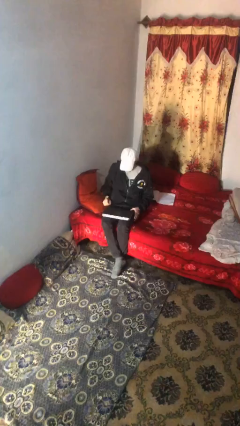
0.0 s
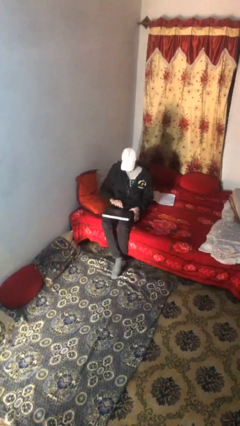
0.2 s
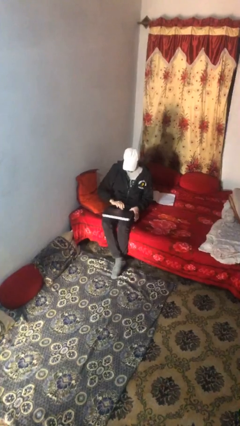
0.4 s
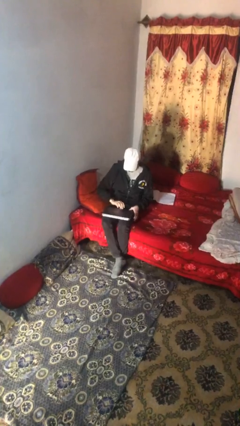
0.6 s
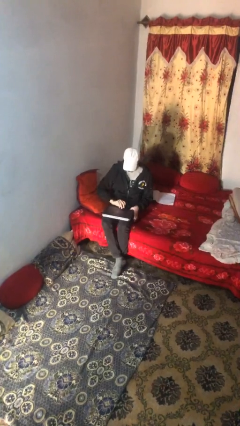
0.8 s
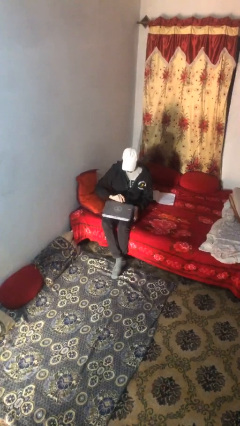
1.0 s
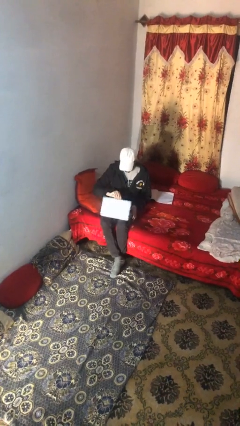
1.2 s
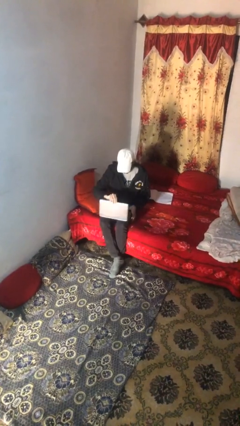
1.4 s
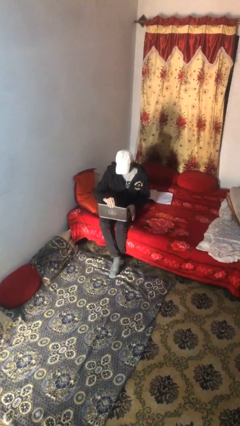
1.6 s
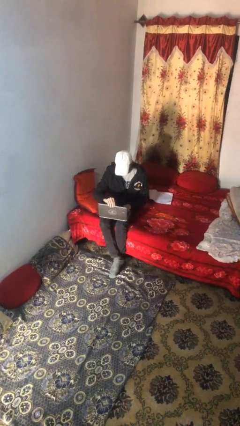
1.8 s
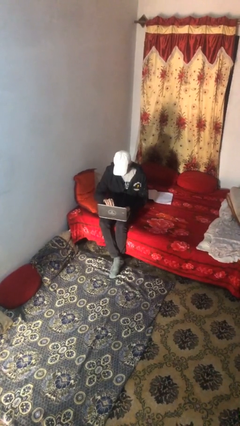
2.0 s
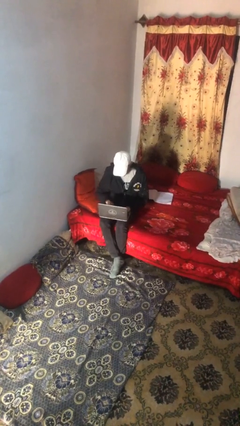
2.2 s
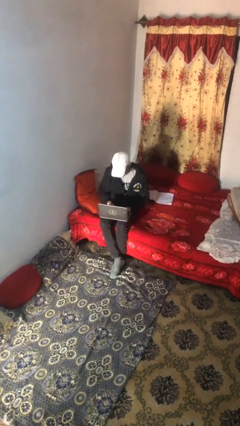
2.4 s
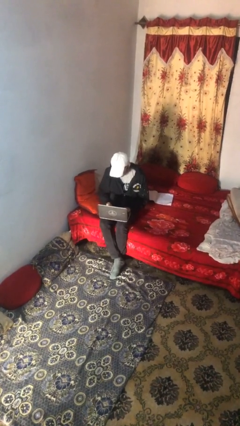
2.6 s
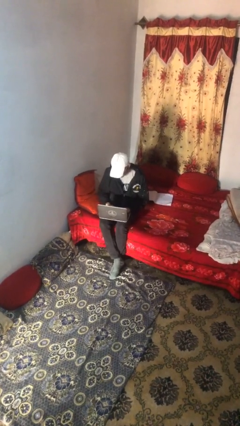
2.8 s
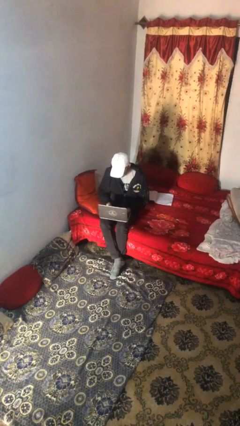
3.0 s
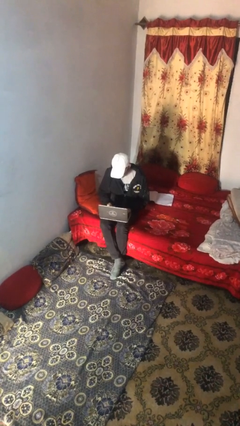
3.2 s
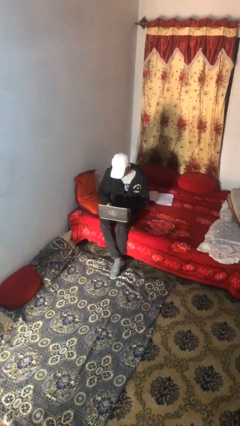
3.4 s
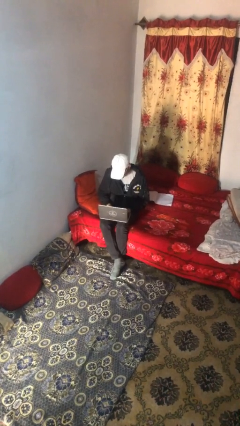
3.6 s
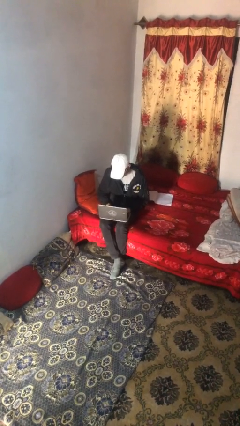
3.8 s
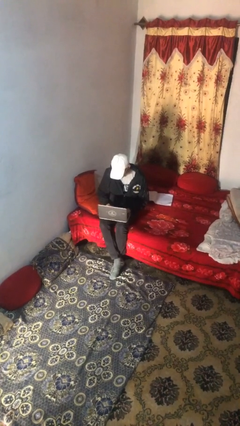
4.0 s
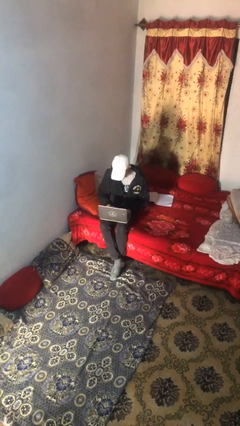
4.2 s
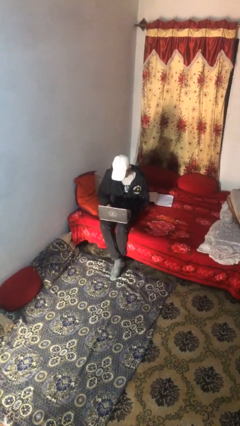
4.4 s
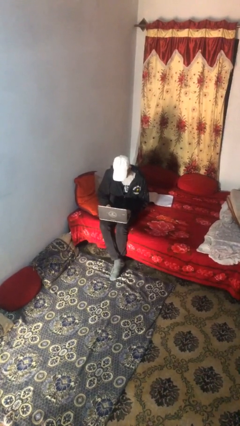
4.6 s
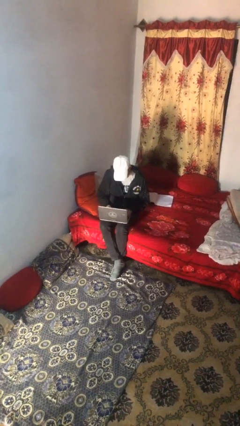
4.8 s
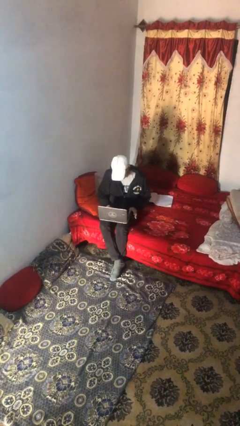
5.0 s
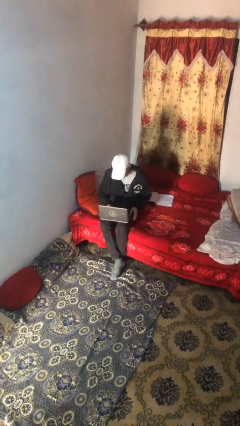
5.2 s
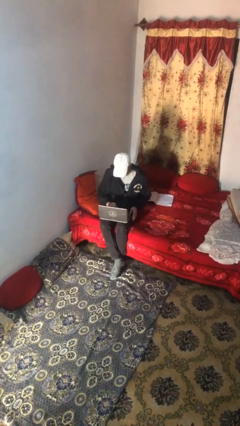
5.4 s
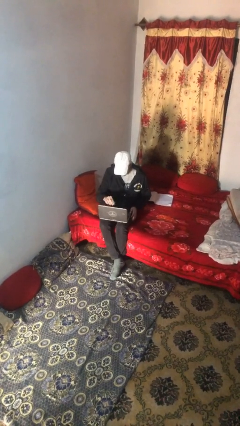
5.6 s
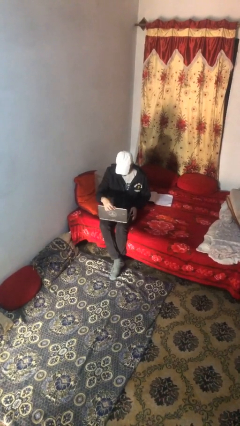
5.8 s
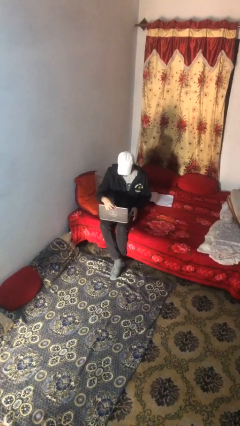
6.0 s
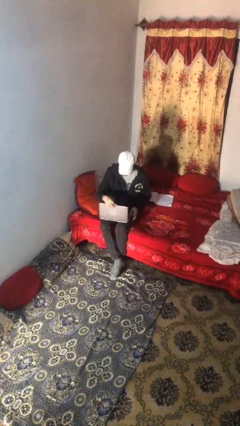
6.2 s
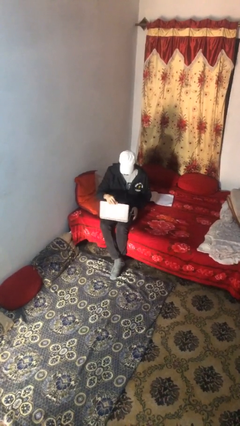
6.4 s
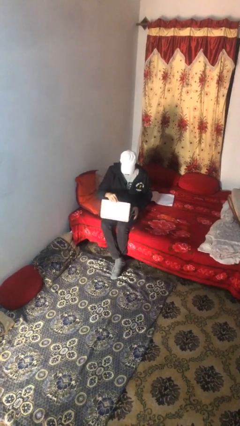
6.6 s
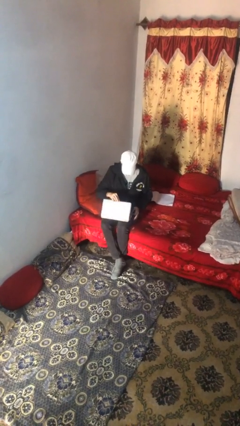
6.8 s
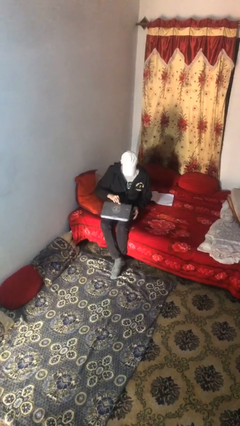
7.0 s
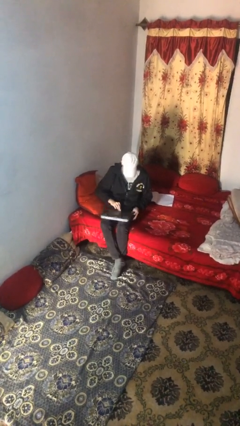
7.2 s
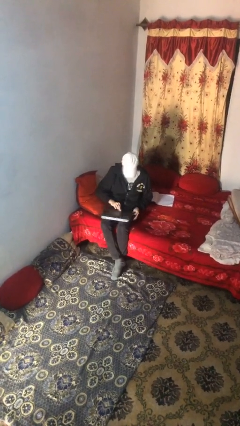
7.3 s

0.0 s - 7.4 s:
person interacts with laptop

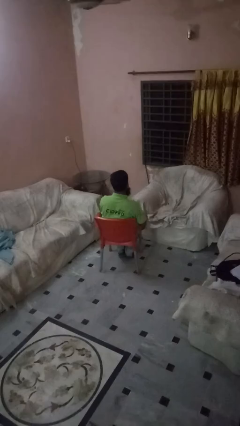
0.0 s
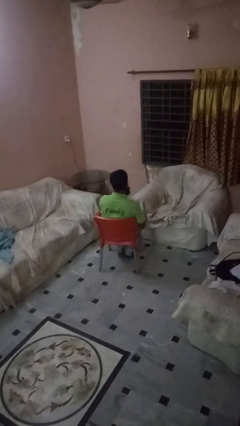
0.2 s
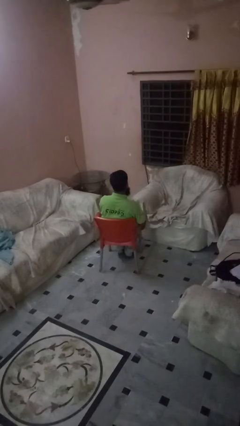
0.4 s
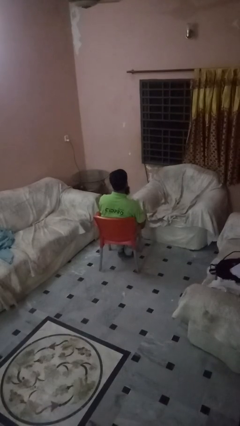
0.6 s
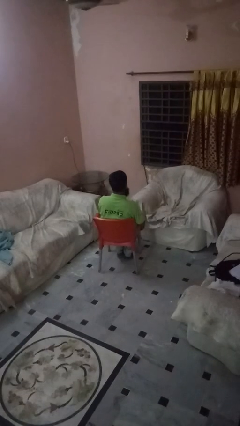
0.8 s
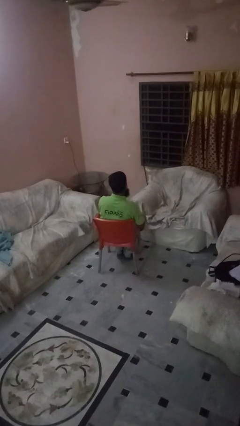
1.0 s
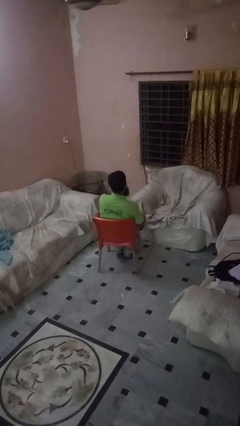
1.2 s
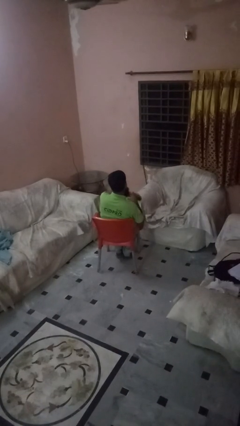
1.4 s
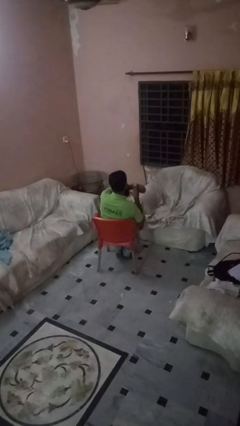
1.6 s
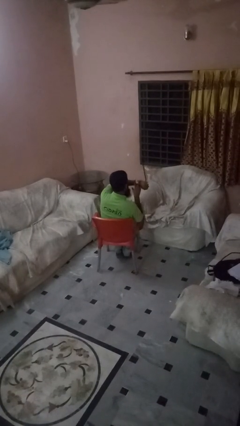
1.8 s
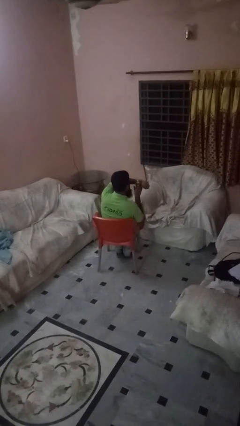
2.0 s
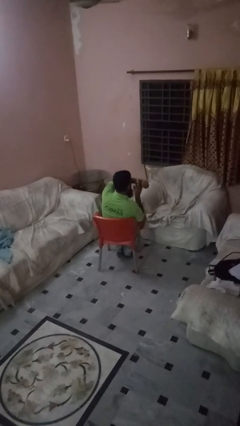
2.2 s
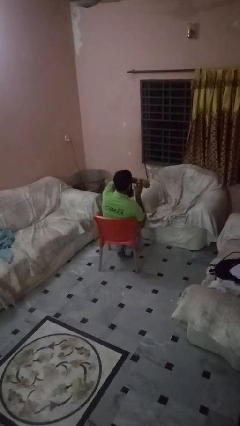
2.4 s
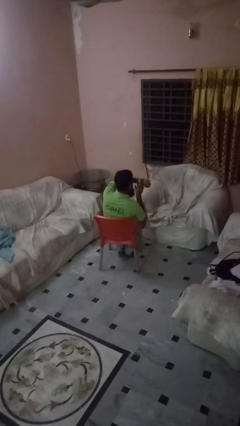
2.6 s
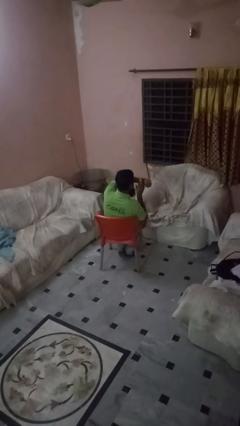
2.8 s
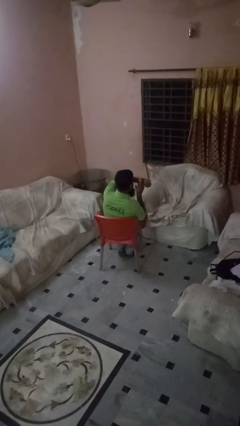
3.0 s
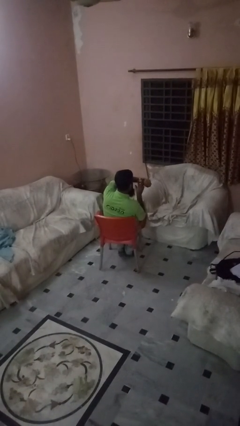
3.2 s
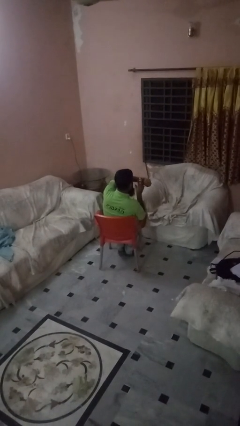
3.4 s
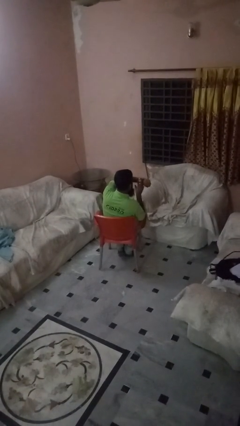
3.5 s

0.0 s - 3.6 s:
person gestures watch closely

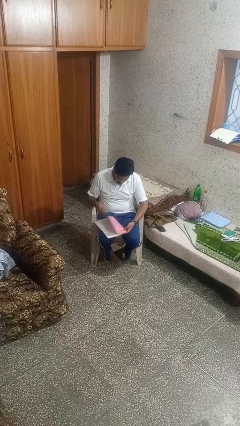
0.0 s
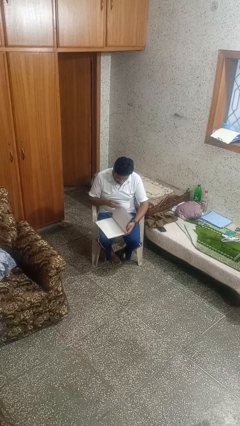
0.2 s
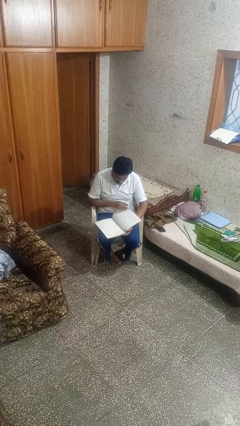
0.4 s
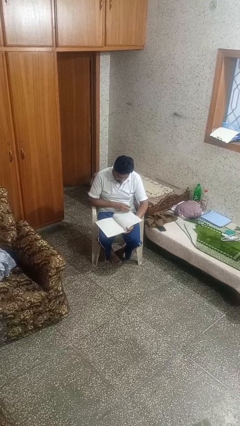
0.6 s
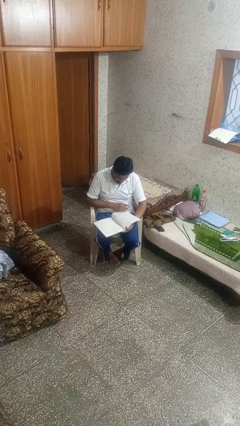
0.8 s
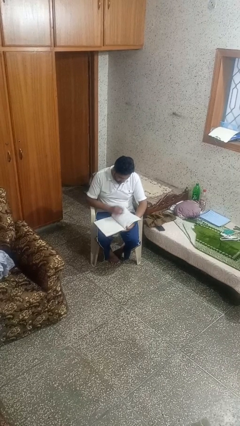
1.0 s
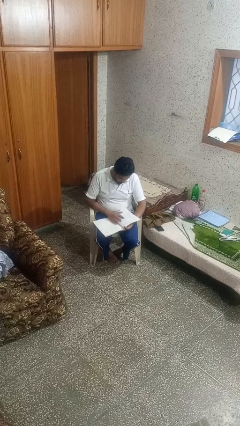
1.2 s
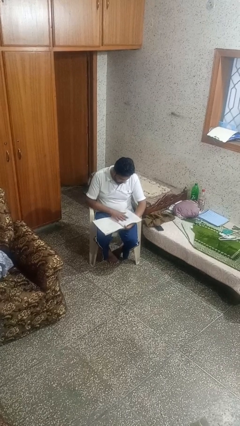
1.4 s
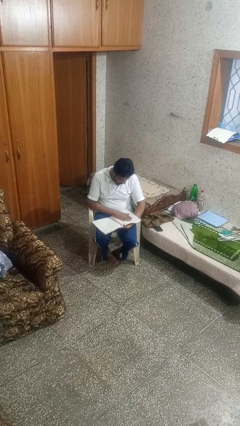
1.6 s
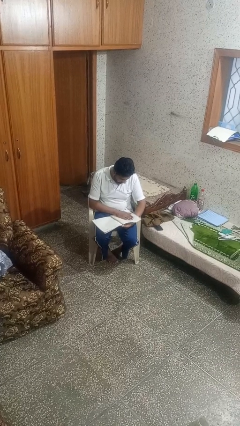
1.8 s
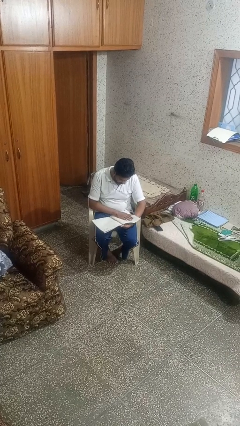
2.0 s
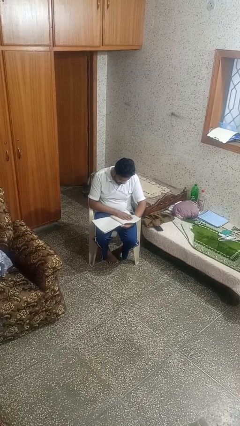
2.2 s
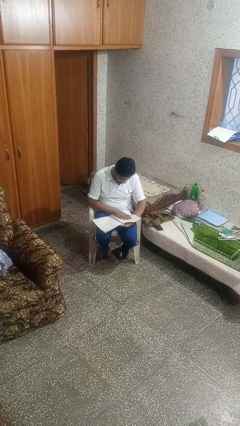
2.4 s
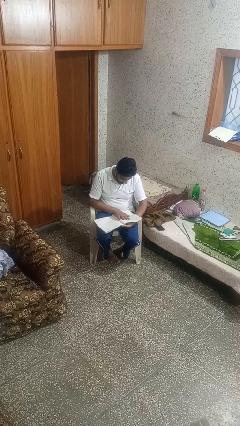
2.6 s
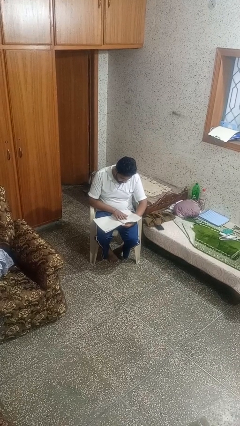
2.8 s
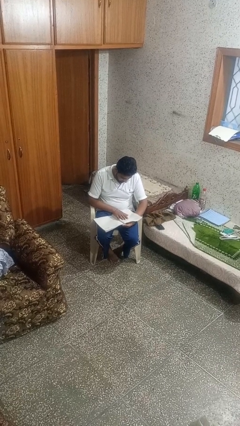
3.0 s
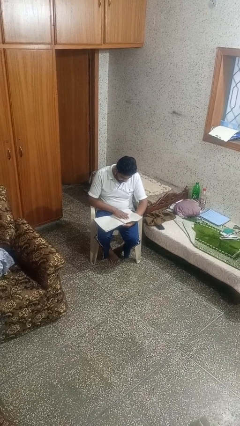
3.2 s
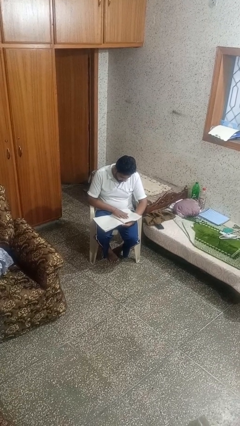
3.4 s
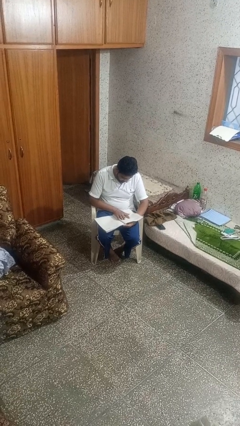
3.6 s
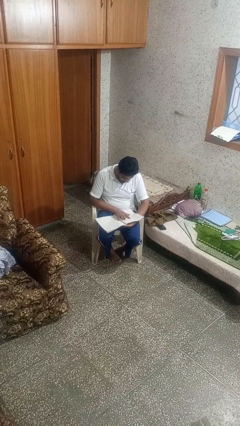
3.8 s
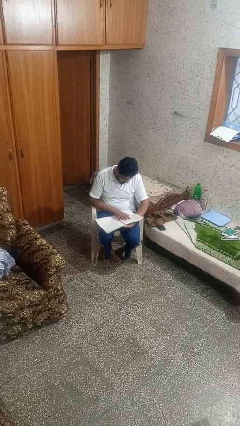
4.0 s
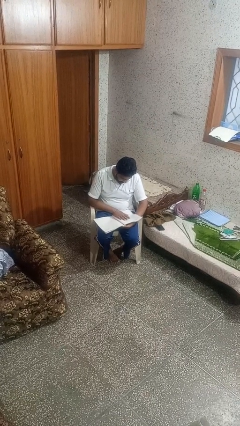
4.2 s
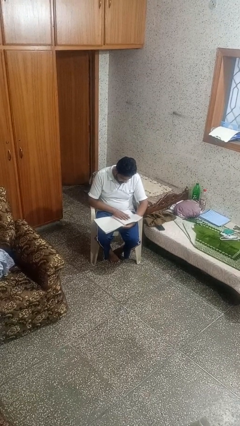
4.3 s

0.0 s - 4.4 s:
person reads book

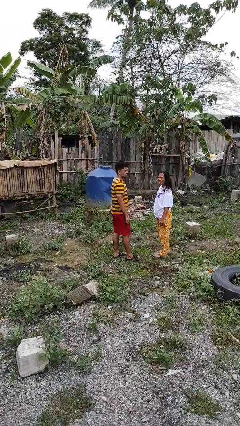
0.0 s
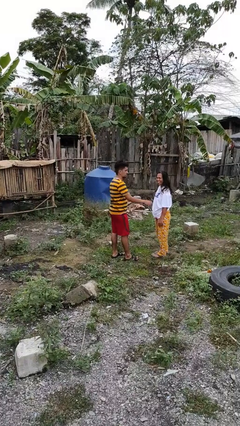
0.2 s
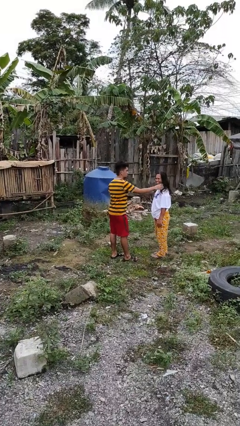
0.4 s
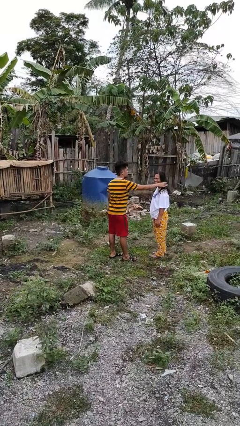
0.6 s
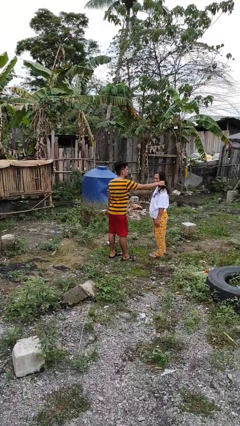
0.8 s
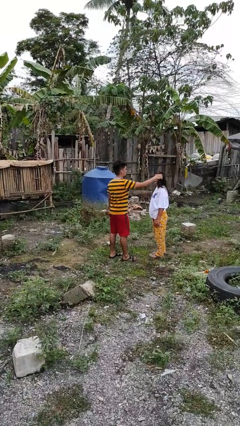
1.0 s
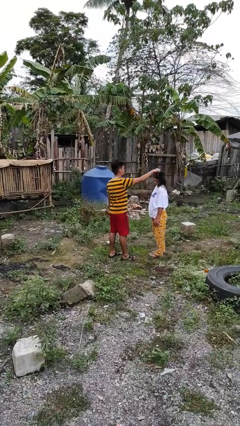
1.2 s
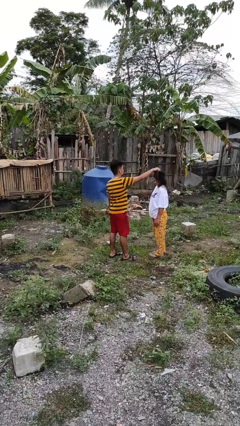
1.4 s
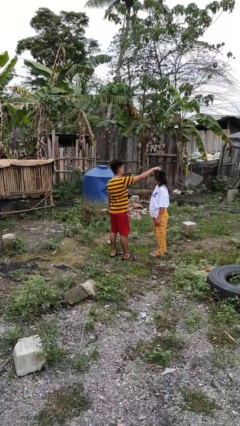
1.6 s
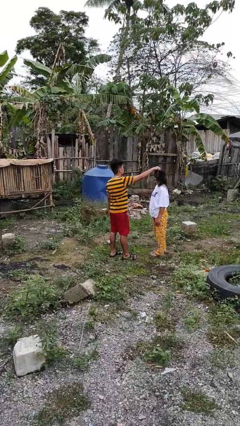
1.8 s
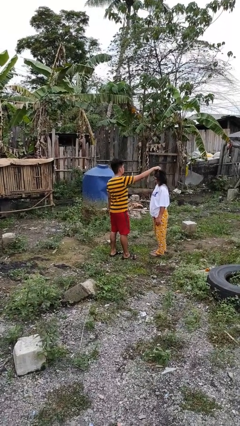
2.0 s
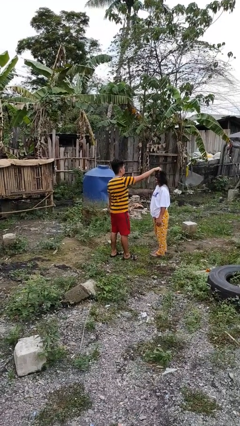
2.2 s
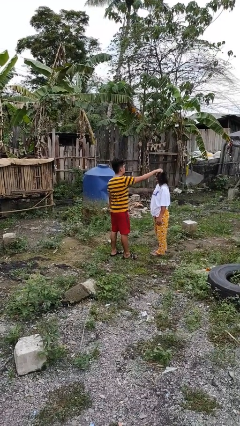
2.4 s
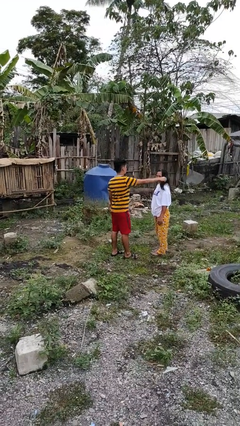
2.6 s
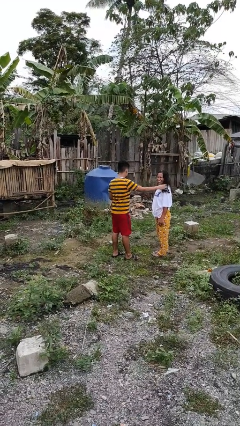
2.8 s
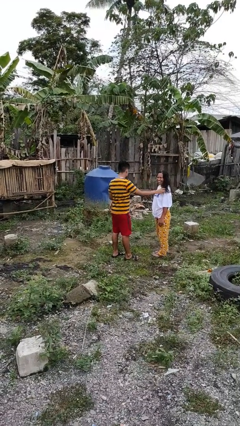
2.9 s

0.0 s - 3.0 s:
person grabs person by hair
